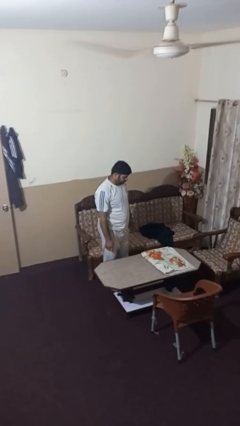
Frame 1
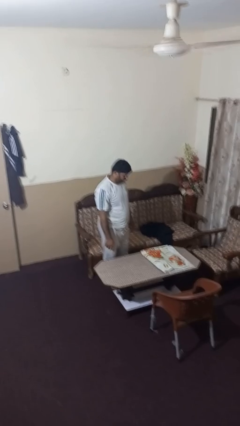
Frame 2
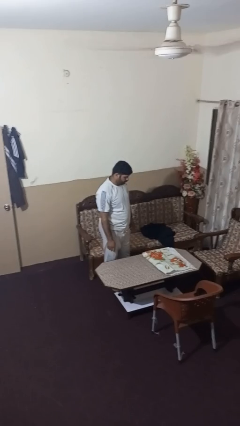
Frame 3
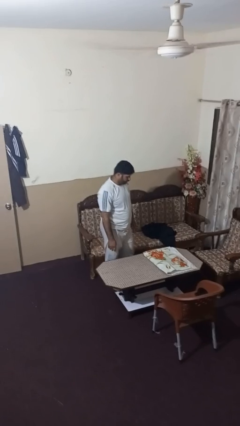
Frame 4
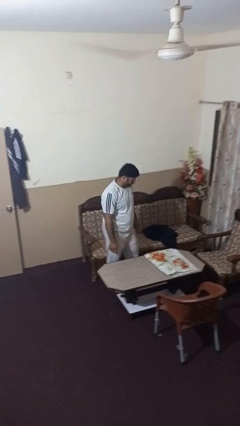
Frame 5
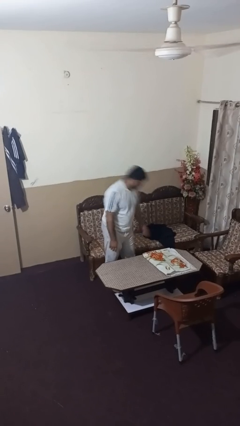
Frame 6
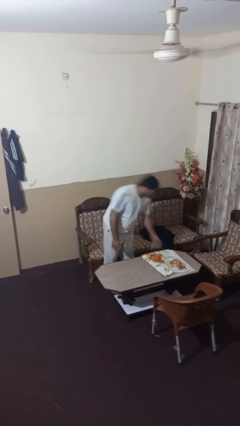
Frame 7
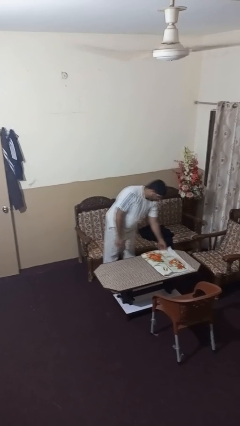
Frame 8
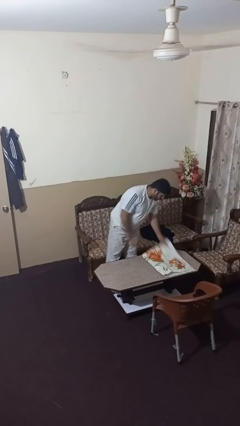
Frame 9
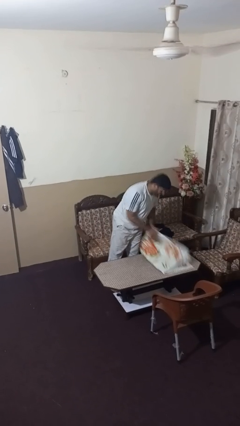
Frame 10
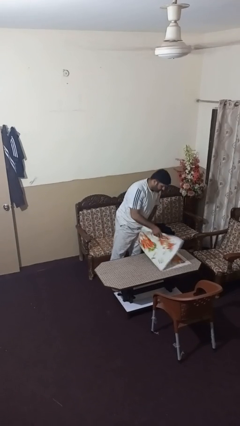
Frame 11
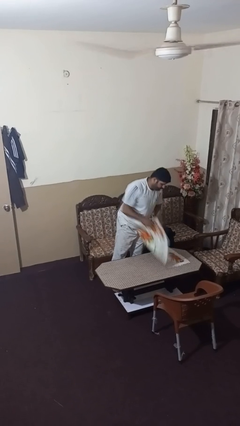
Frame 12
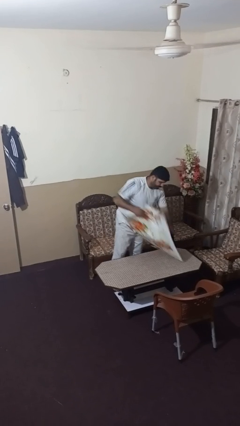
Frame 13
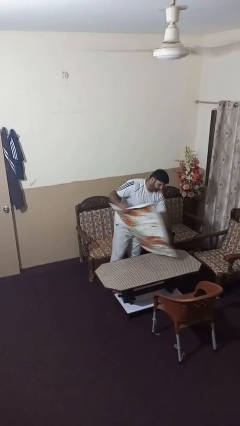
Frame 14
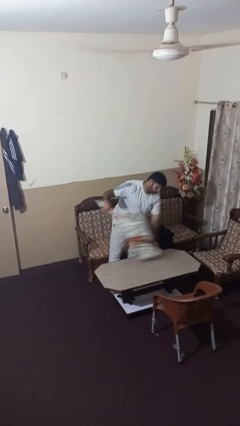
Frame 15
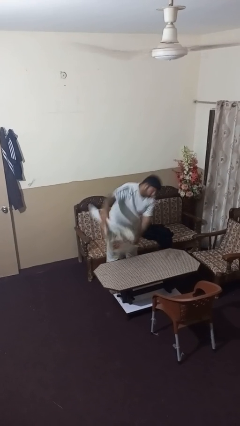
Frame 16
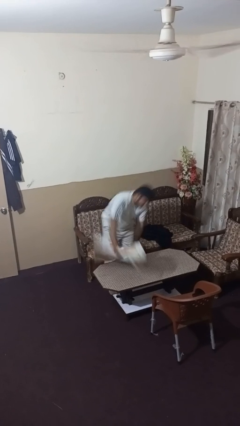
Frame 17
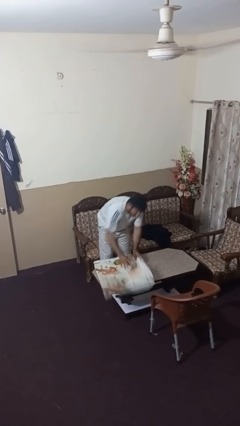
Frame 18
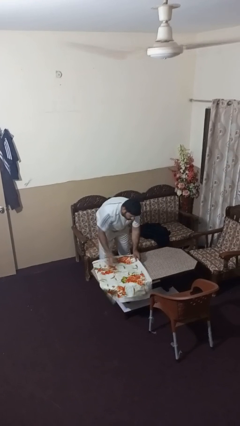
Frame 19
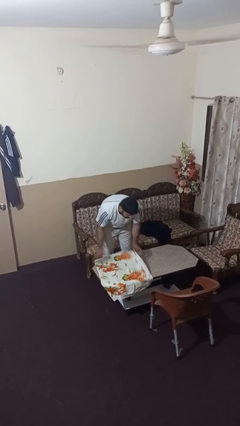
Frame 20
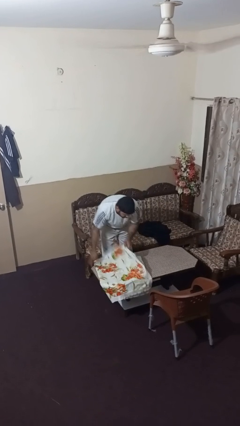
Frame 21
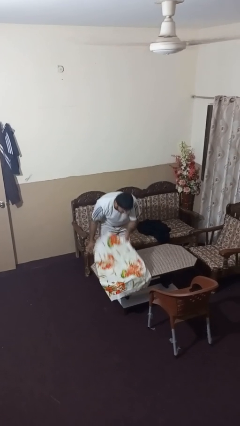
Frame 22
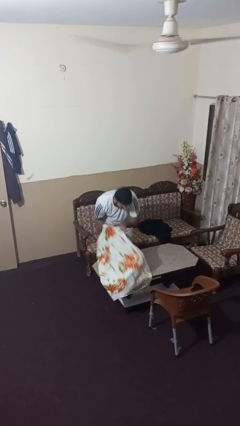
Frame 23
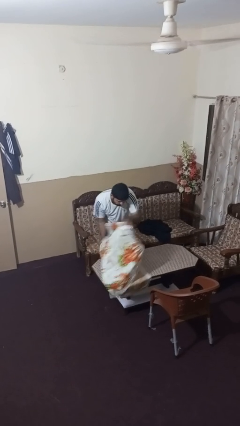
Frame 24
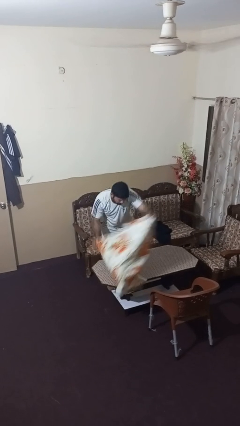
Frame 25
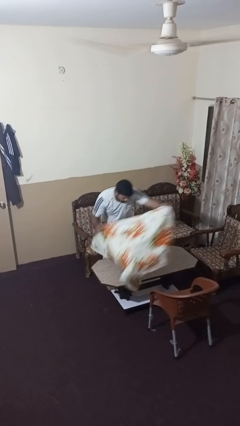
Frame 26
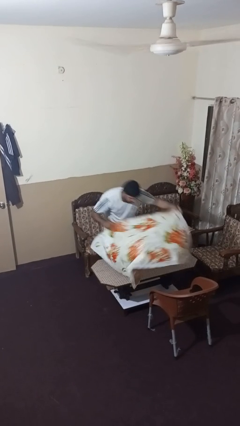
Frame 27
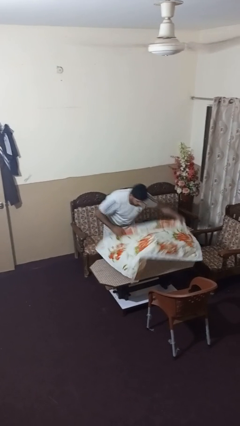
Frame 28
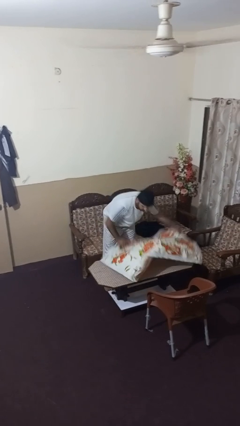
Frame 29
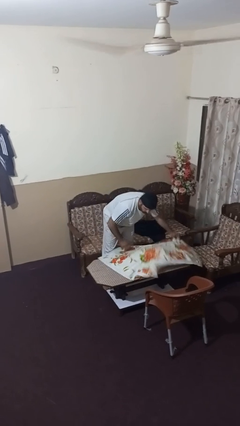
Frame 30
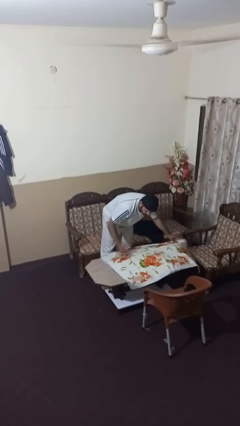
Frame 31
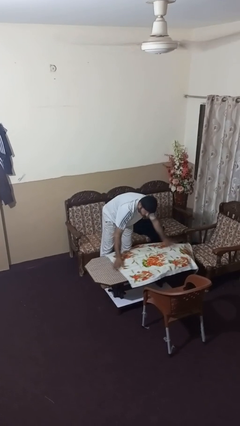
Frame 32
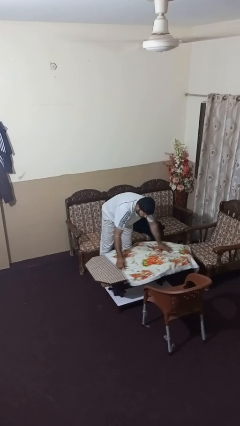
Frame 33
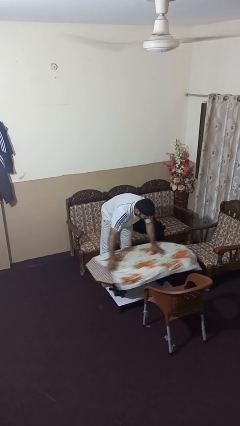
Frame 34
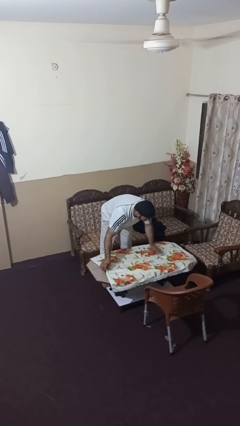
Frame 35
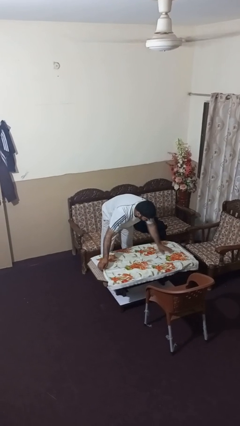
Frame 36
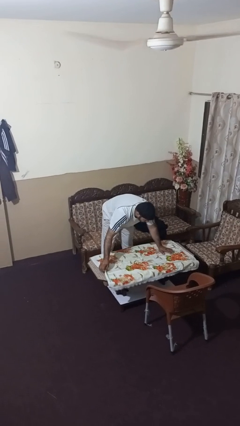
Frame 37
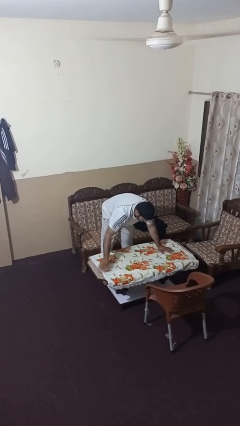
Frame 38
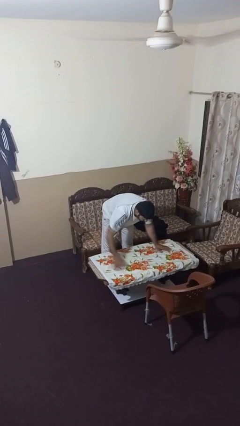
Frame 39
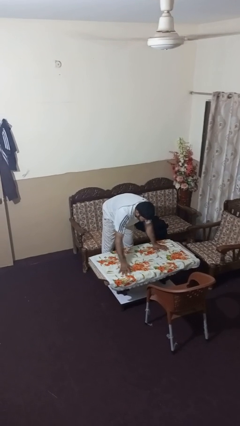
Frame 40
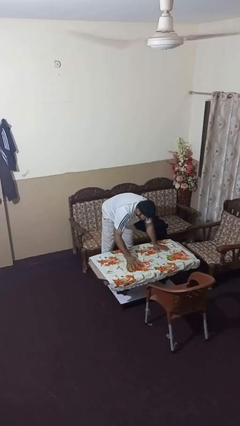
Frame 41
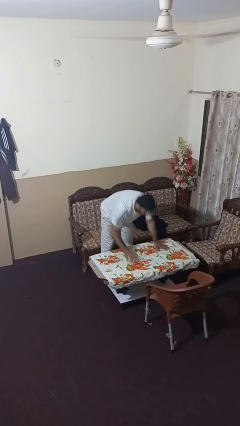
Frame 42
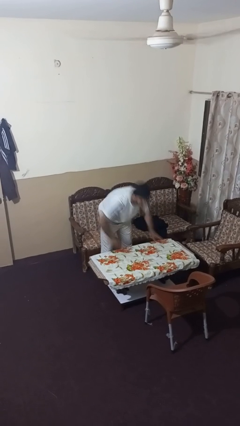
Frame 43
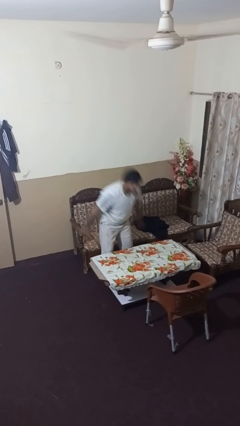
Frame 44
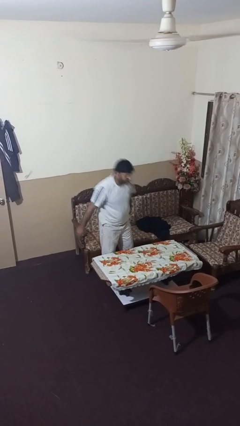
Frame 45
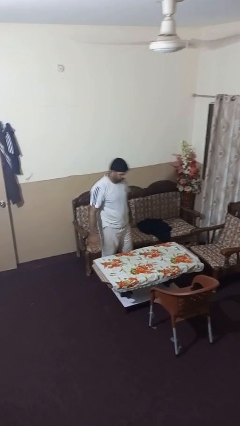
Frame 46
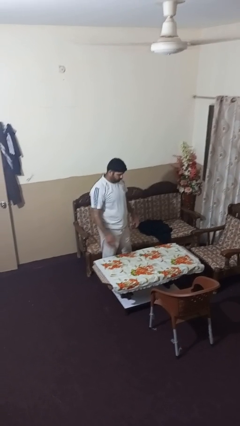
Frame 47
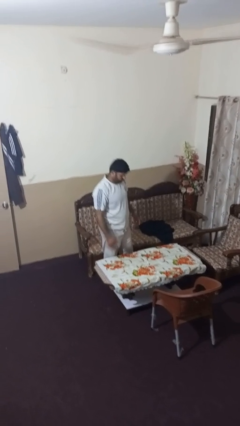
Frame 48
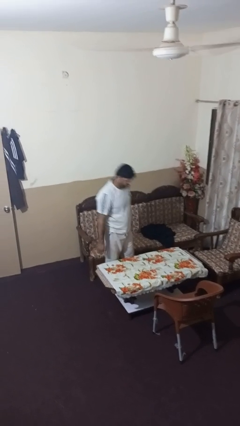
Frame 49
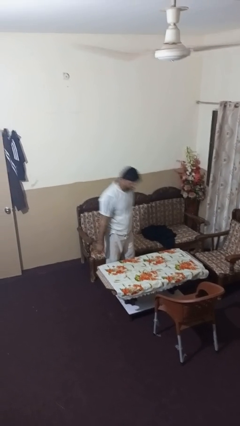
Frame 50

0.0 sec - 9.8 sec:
person spreads tablecloth

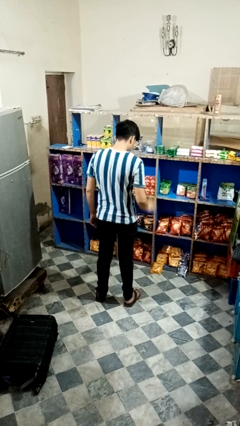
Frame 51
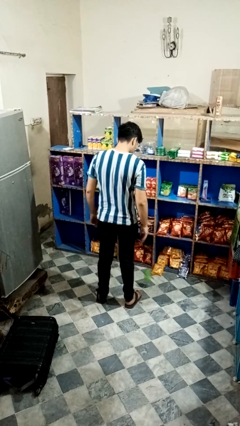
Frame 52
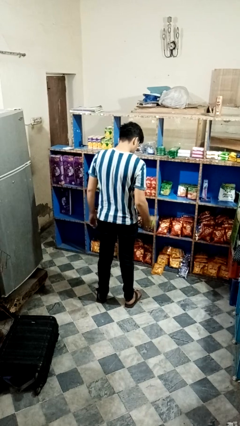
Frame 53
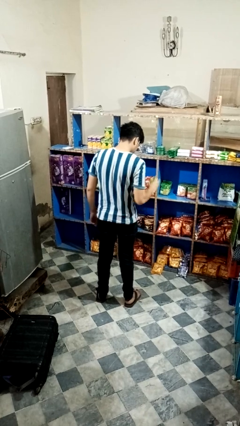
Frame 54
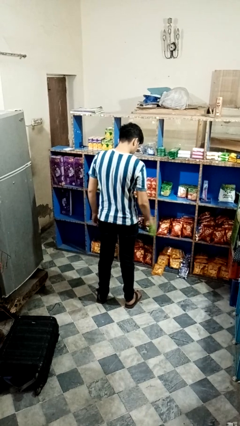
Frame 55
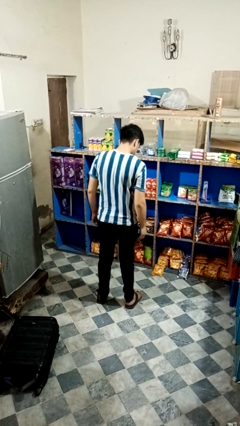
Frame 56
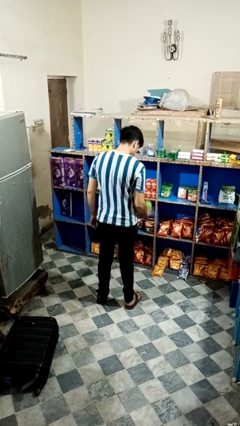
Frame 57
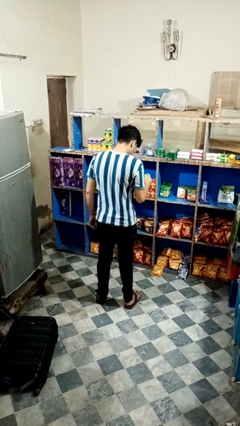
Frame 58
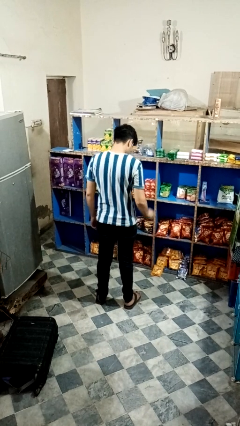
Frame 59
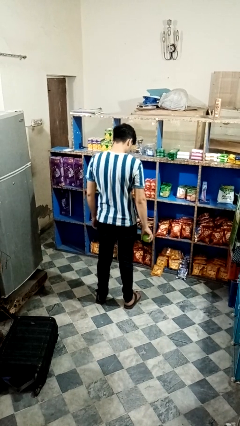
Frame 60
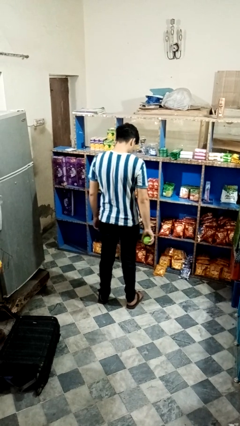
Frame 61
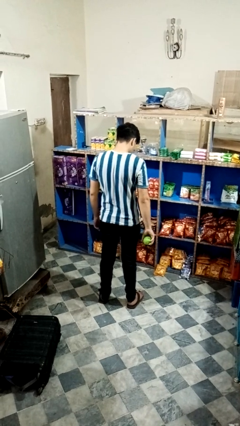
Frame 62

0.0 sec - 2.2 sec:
person bounces ball on floor

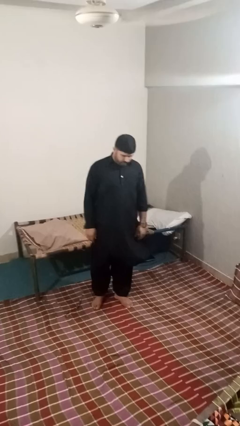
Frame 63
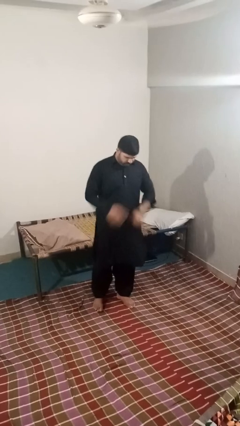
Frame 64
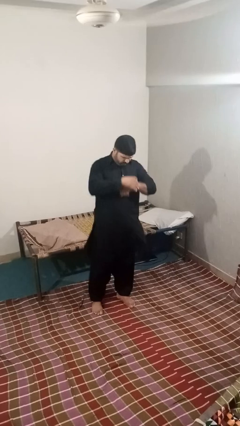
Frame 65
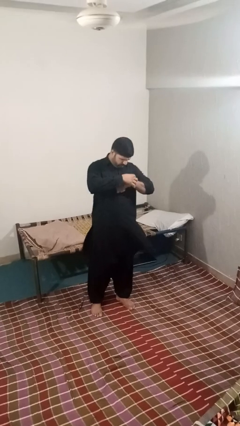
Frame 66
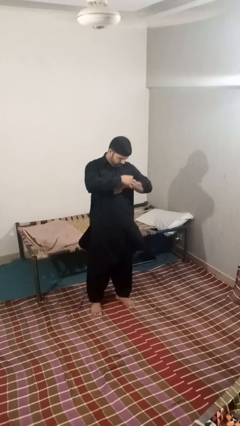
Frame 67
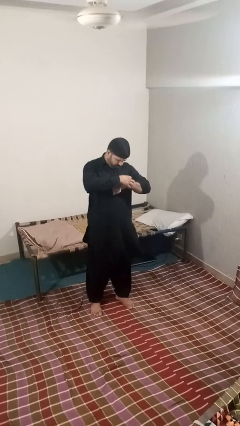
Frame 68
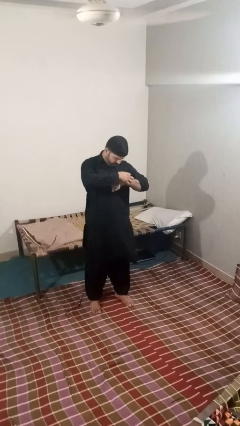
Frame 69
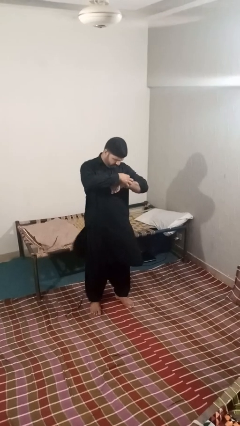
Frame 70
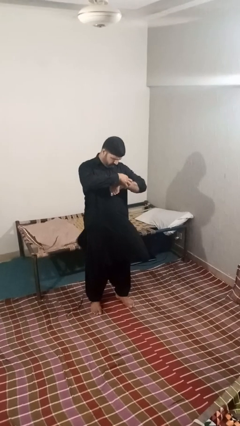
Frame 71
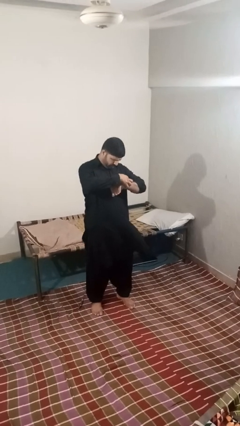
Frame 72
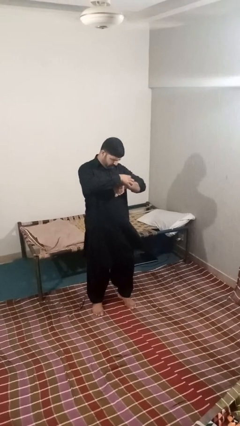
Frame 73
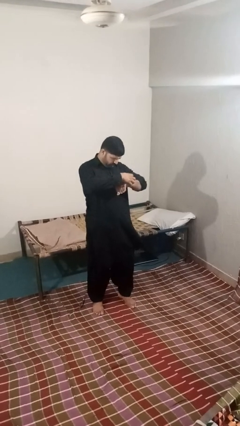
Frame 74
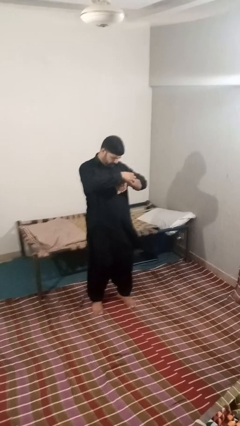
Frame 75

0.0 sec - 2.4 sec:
person looks at wristwatch

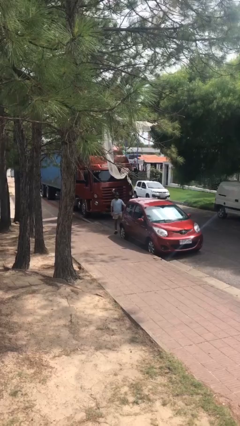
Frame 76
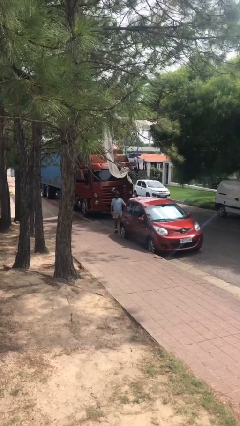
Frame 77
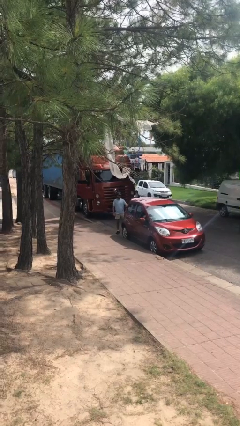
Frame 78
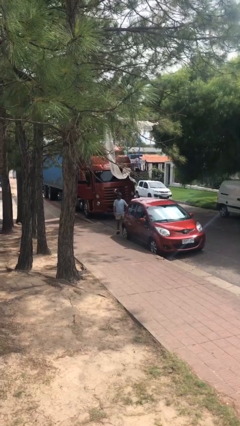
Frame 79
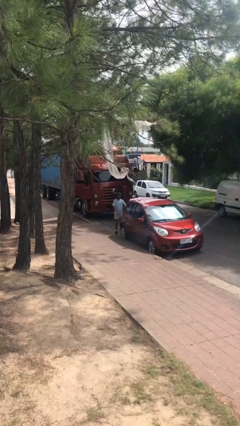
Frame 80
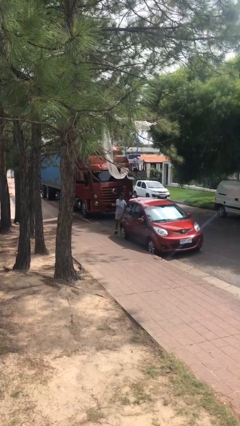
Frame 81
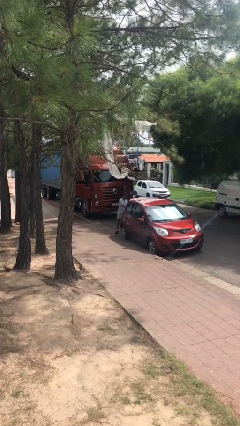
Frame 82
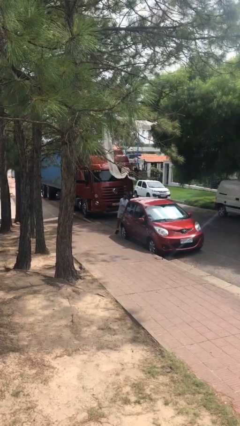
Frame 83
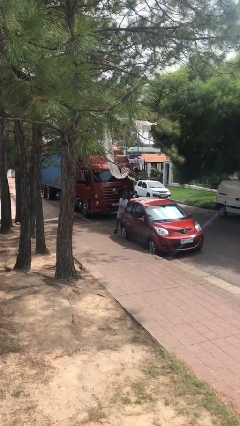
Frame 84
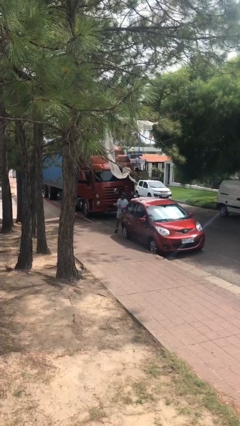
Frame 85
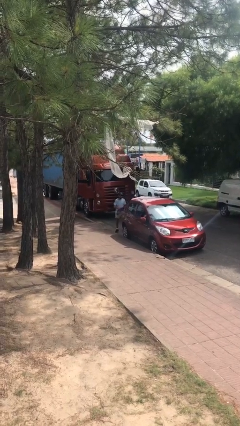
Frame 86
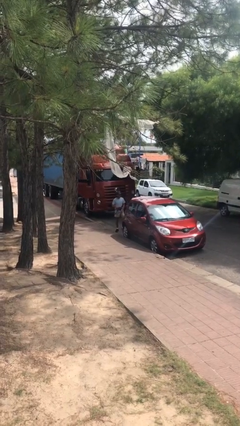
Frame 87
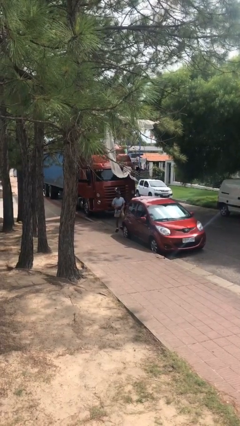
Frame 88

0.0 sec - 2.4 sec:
person unloads car

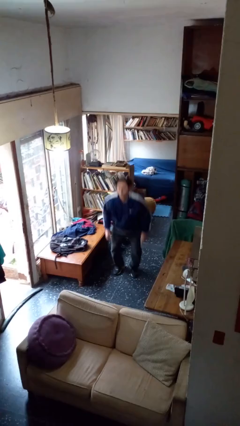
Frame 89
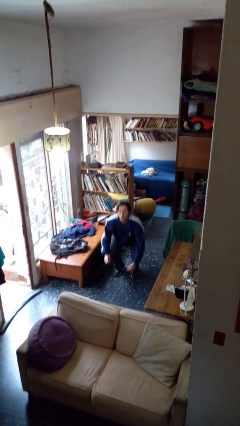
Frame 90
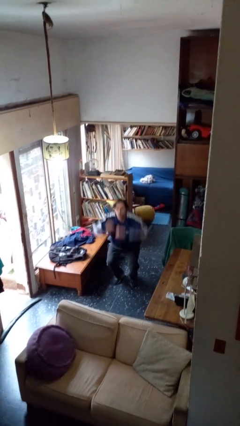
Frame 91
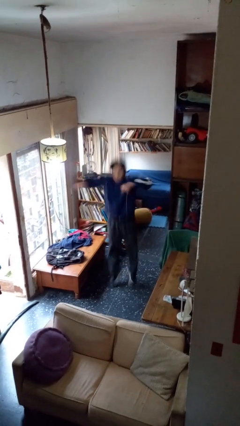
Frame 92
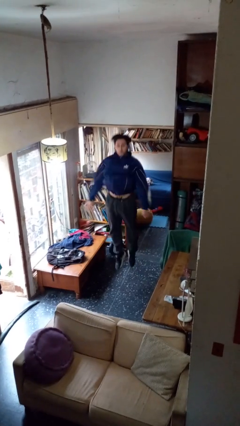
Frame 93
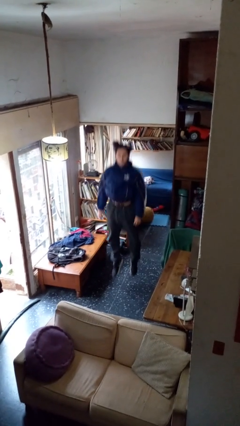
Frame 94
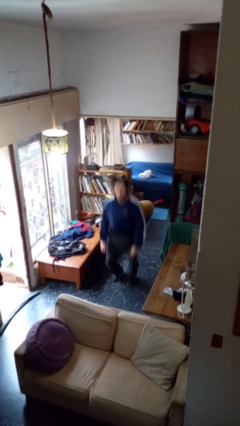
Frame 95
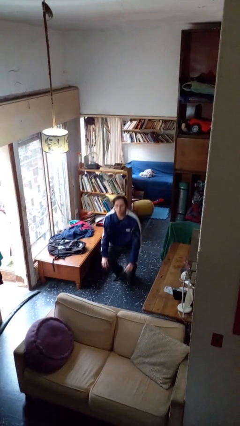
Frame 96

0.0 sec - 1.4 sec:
person jumps
